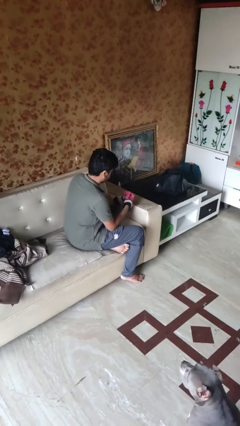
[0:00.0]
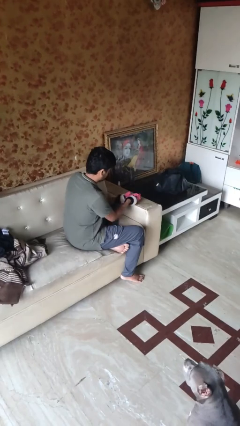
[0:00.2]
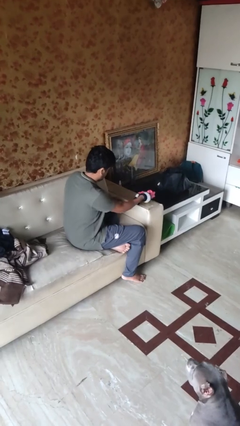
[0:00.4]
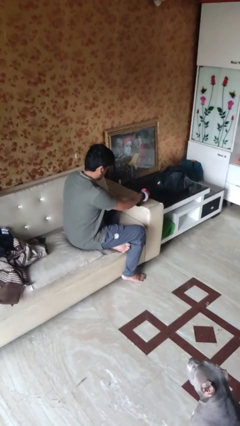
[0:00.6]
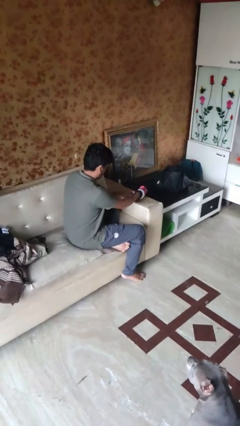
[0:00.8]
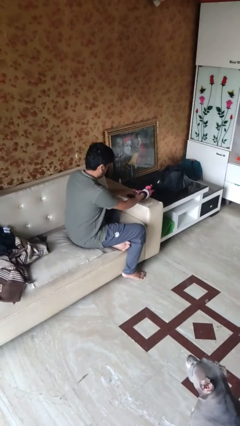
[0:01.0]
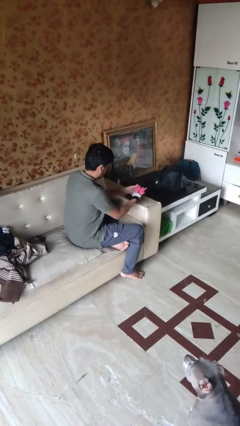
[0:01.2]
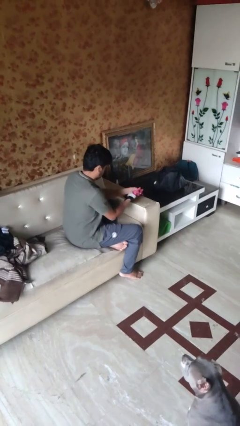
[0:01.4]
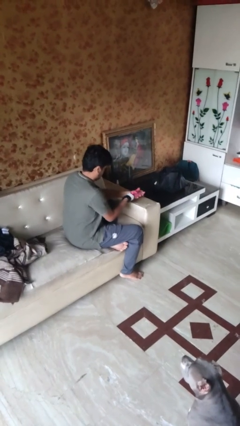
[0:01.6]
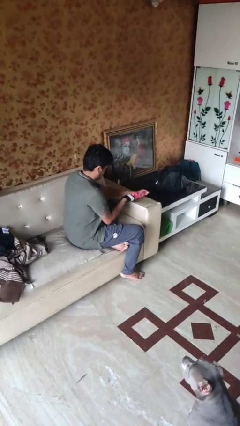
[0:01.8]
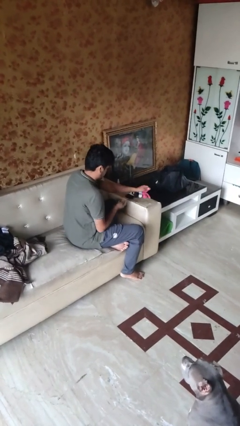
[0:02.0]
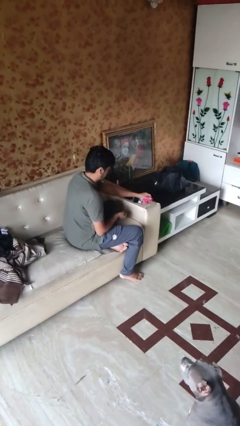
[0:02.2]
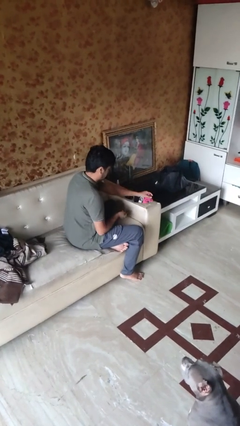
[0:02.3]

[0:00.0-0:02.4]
person takes off gloves

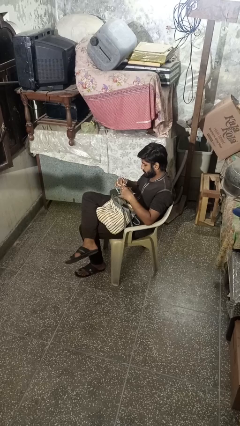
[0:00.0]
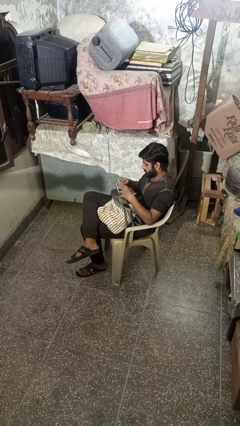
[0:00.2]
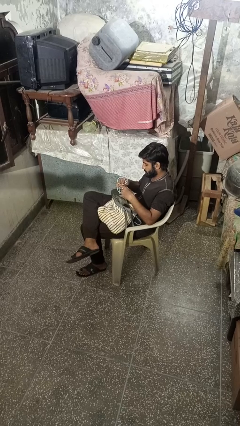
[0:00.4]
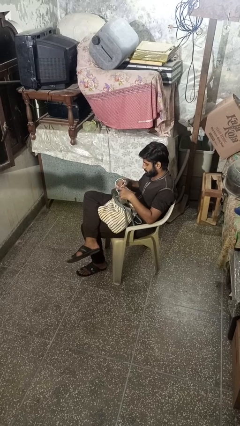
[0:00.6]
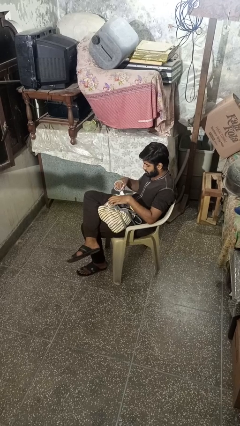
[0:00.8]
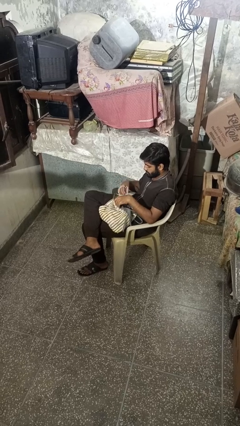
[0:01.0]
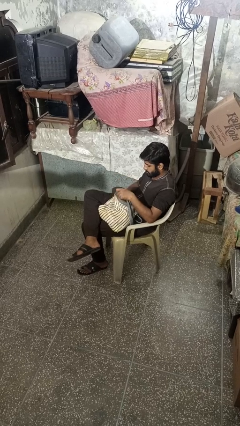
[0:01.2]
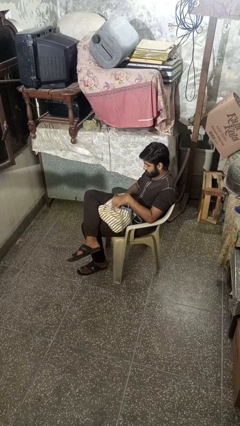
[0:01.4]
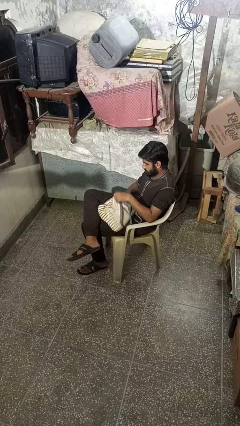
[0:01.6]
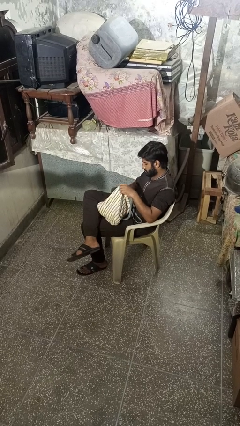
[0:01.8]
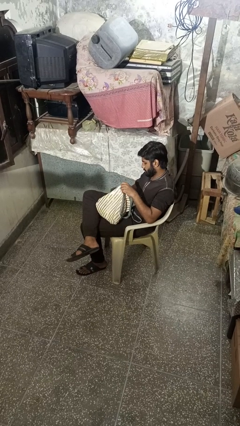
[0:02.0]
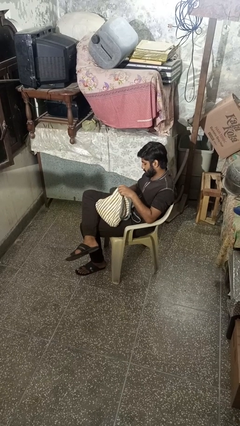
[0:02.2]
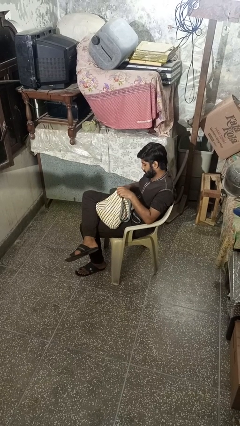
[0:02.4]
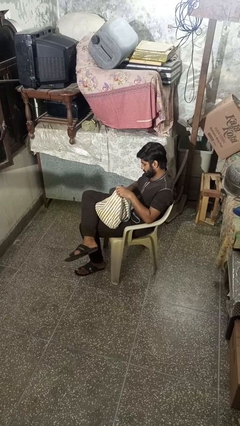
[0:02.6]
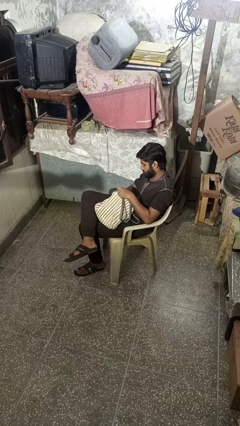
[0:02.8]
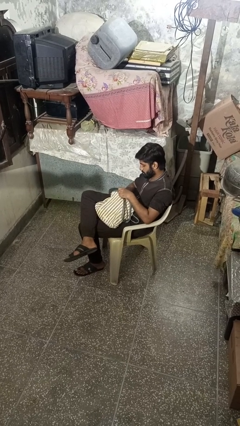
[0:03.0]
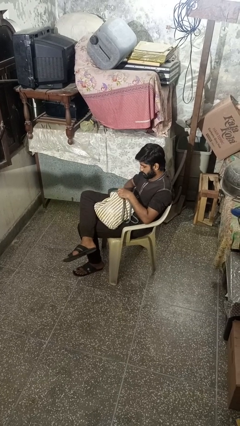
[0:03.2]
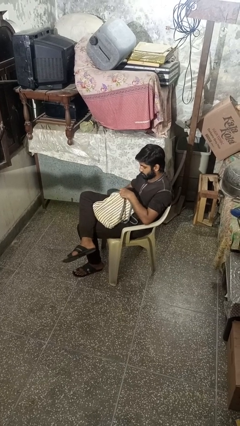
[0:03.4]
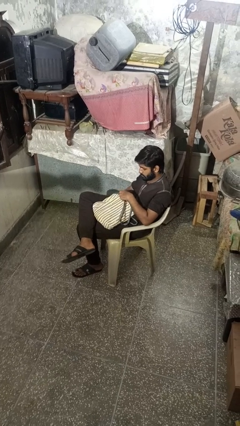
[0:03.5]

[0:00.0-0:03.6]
person puts object into purse

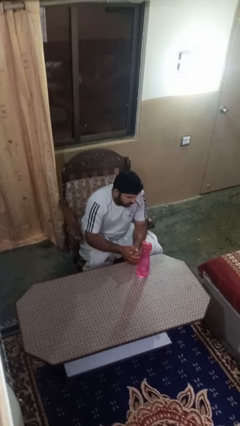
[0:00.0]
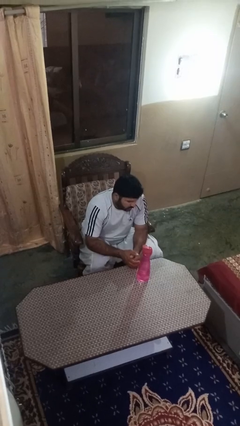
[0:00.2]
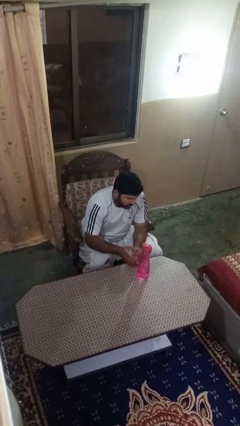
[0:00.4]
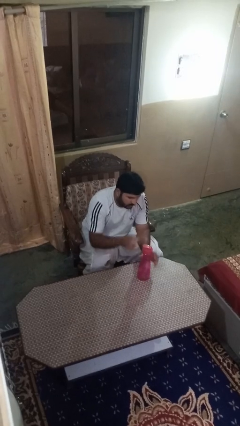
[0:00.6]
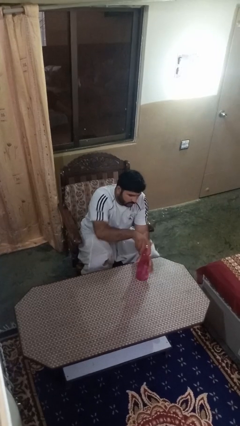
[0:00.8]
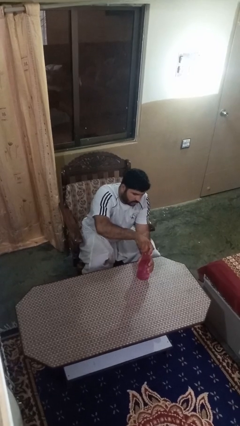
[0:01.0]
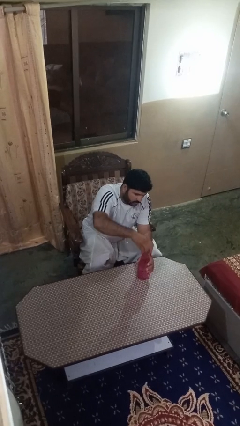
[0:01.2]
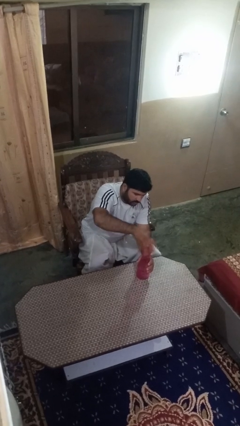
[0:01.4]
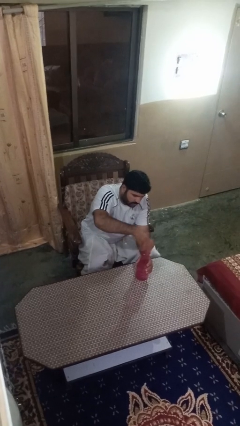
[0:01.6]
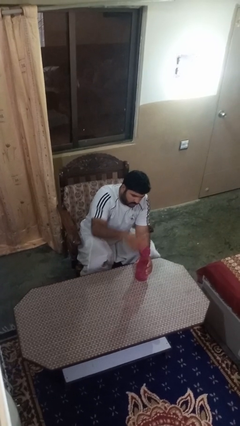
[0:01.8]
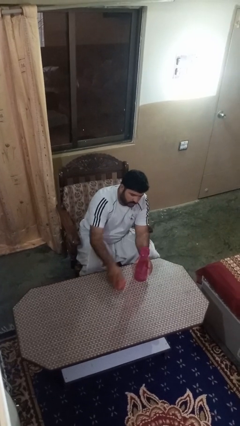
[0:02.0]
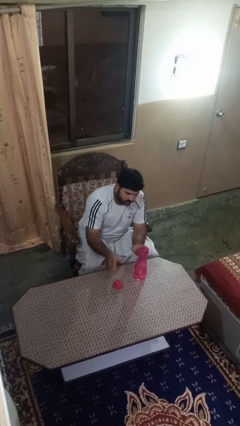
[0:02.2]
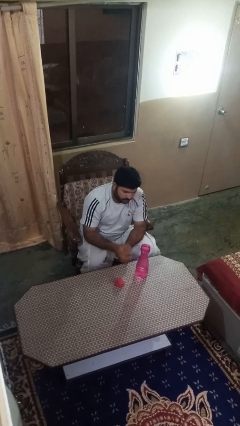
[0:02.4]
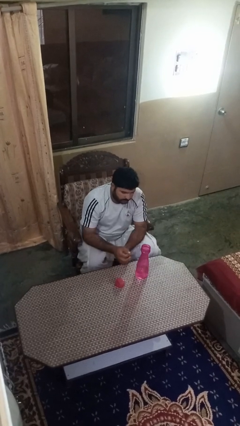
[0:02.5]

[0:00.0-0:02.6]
person unscrews lid from bottle

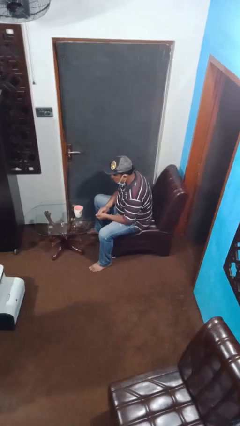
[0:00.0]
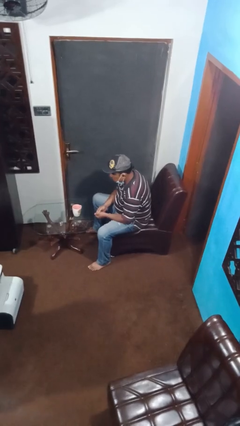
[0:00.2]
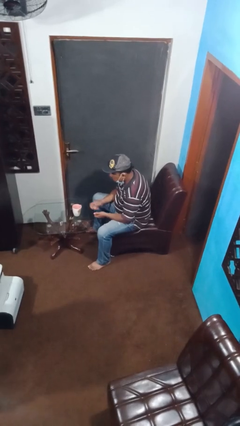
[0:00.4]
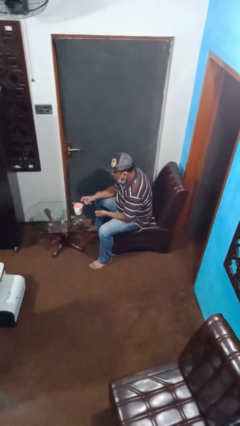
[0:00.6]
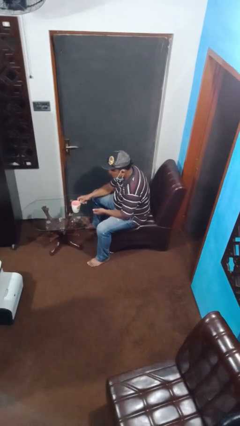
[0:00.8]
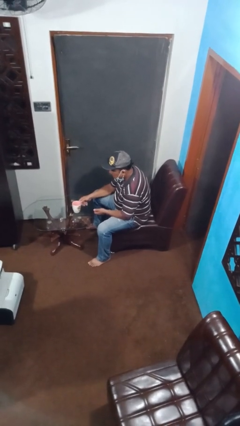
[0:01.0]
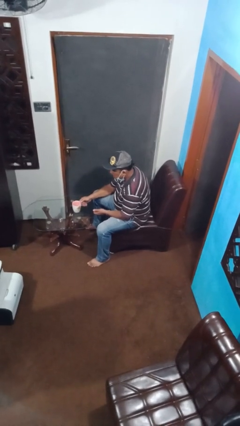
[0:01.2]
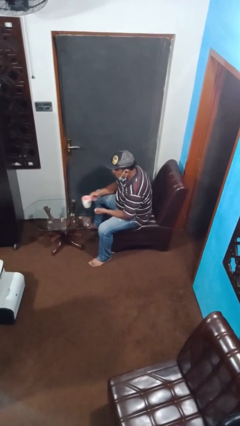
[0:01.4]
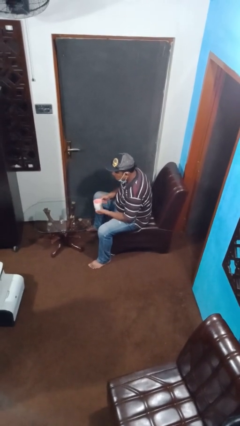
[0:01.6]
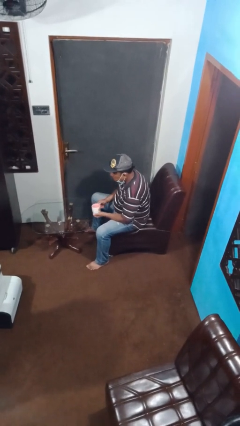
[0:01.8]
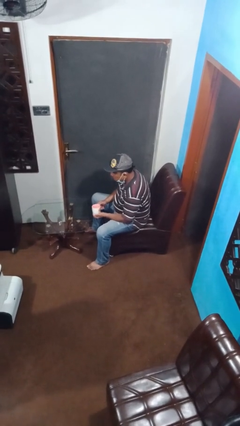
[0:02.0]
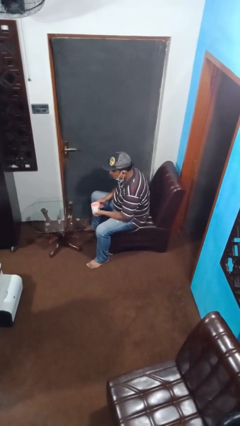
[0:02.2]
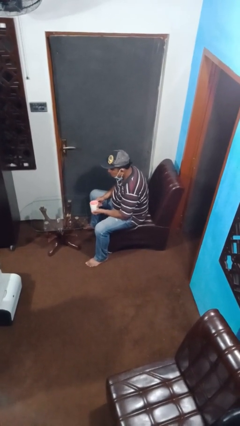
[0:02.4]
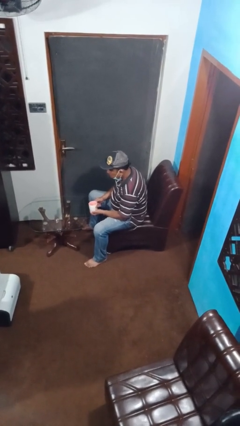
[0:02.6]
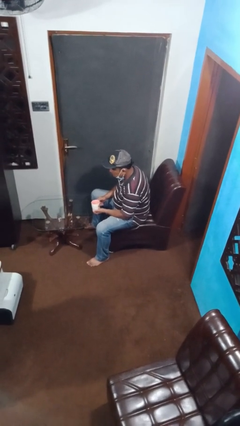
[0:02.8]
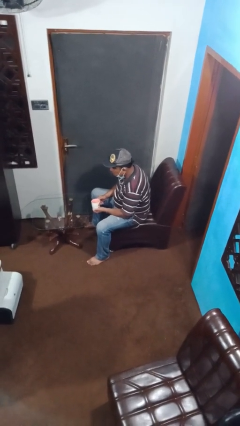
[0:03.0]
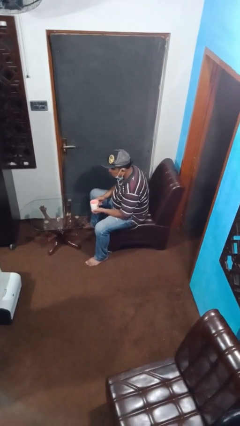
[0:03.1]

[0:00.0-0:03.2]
person picks up object from table

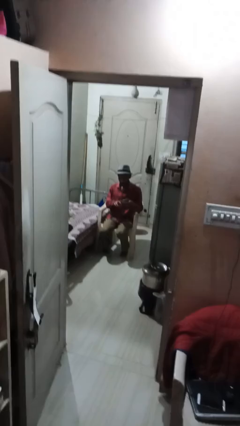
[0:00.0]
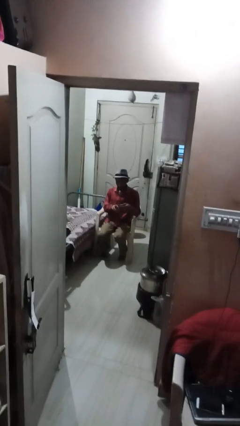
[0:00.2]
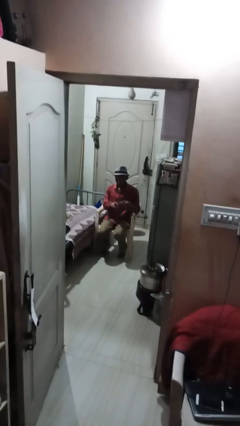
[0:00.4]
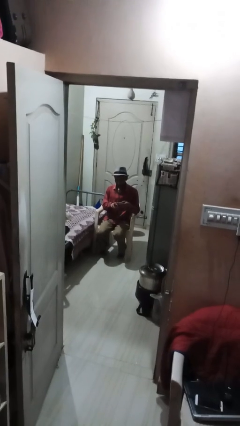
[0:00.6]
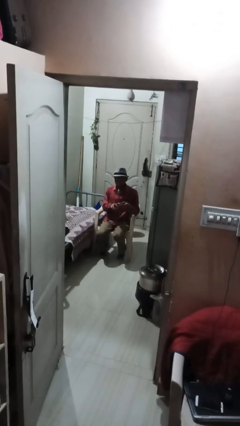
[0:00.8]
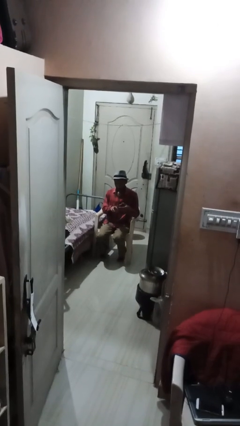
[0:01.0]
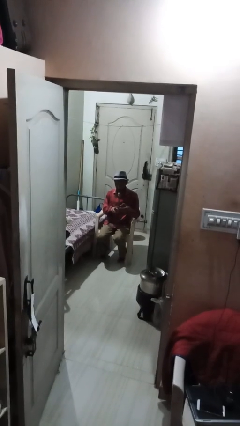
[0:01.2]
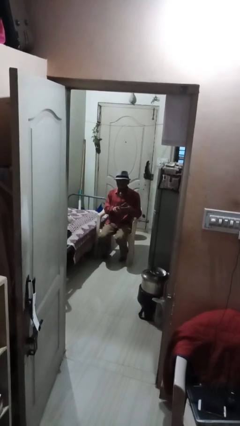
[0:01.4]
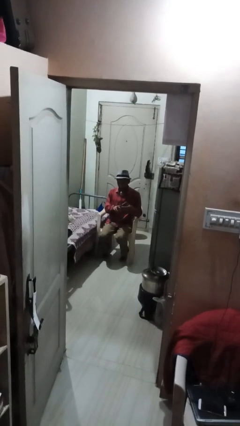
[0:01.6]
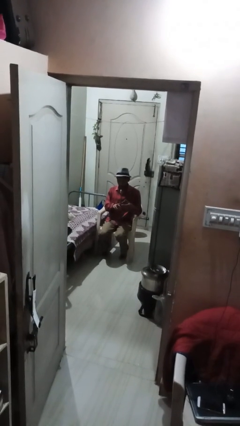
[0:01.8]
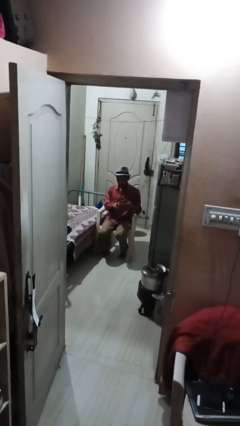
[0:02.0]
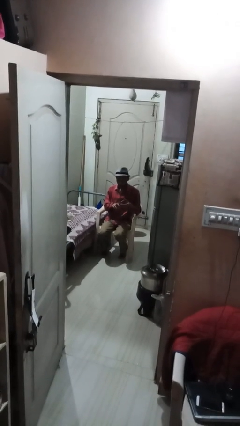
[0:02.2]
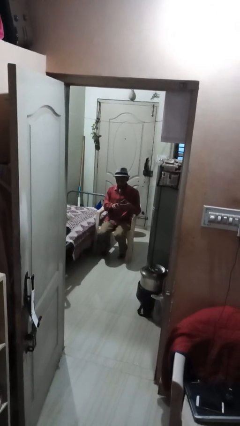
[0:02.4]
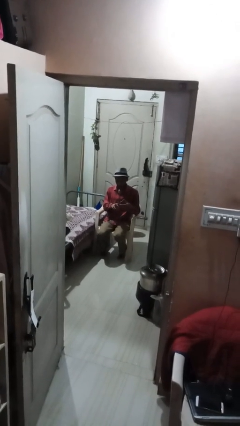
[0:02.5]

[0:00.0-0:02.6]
person clips fingernails

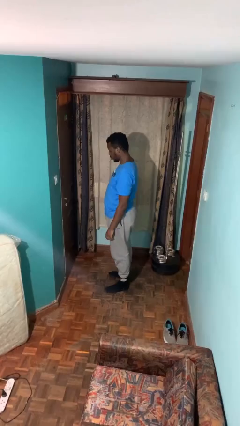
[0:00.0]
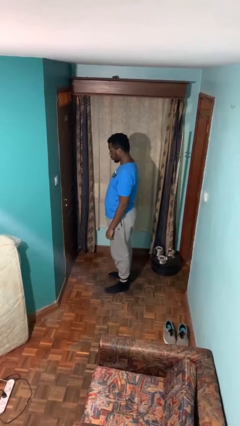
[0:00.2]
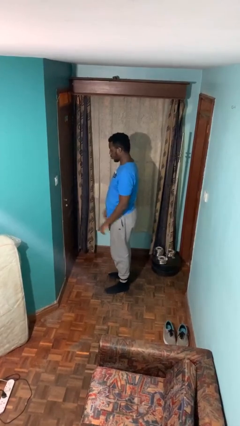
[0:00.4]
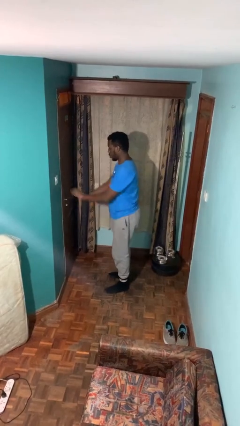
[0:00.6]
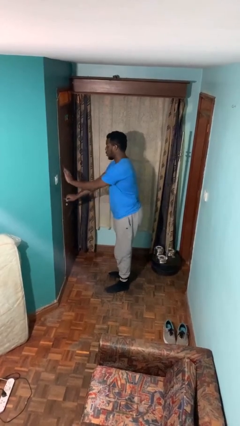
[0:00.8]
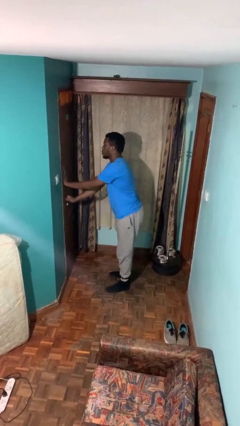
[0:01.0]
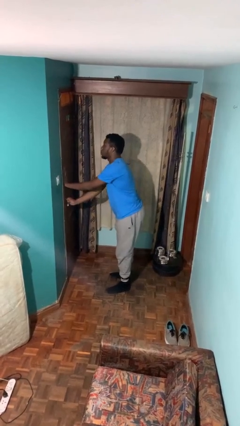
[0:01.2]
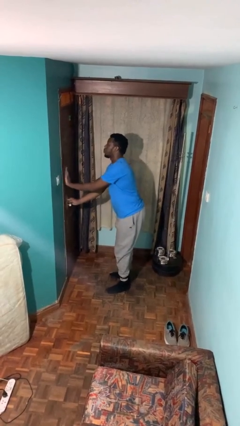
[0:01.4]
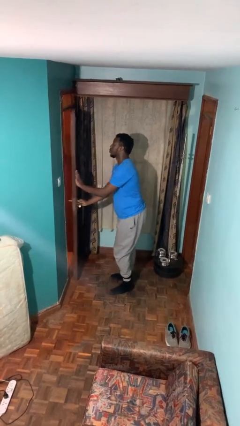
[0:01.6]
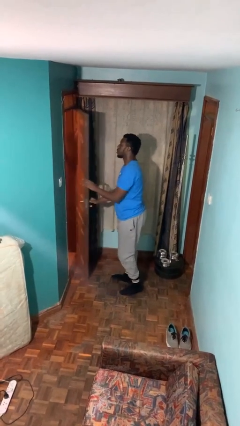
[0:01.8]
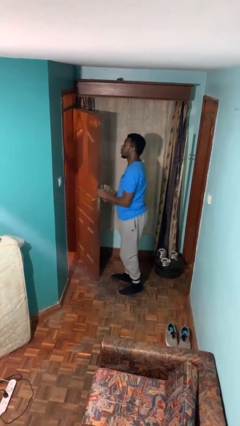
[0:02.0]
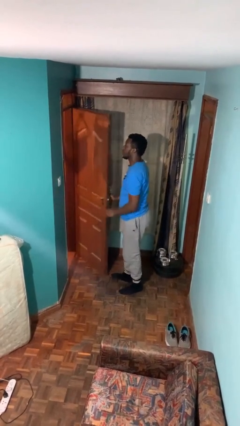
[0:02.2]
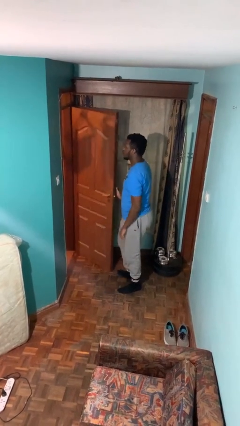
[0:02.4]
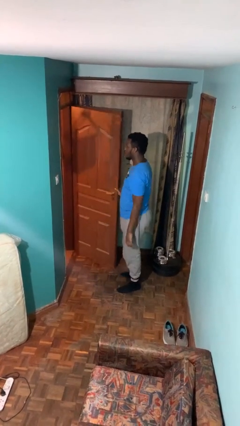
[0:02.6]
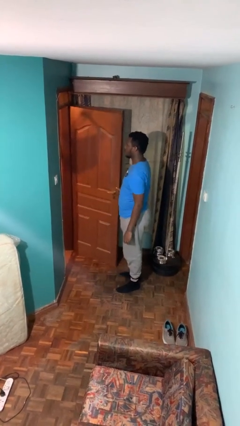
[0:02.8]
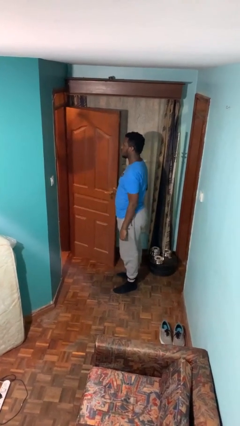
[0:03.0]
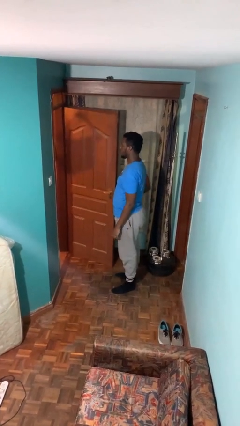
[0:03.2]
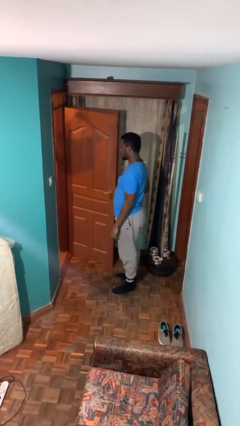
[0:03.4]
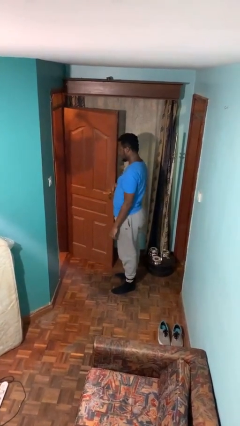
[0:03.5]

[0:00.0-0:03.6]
person opens facility door
